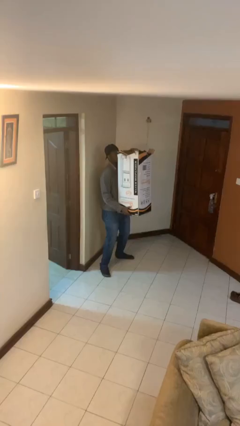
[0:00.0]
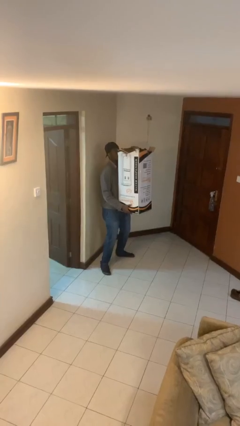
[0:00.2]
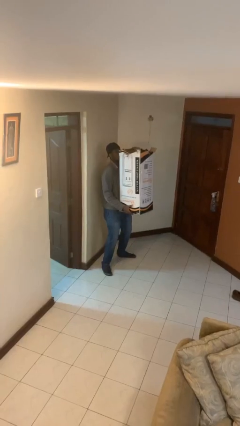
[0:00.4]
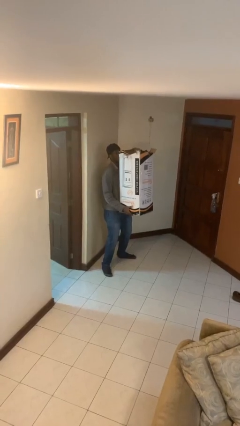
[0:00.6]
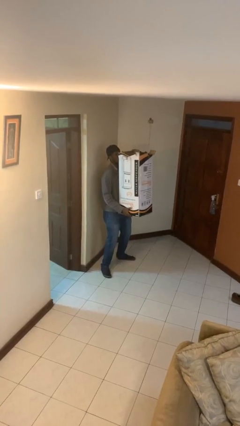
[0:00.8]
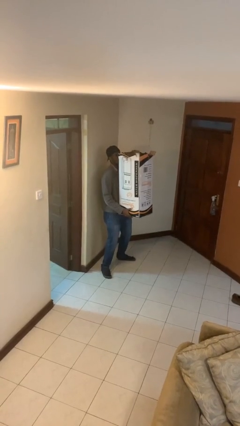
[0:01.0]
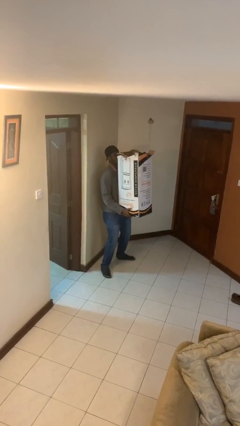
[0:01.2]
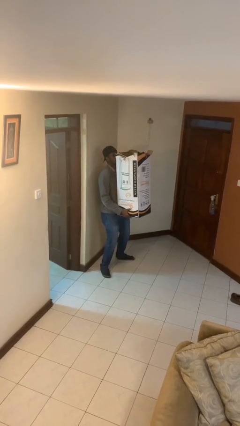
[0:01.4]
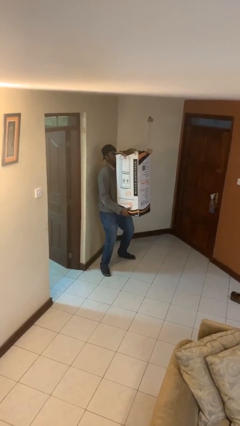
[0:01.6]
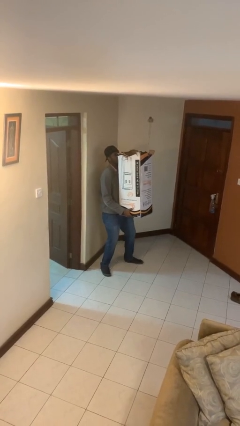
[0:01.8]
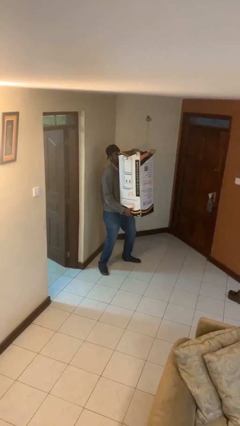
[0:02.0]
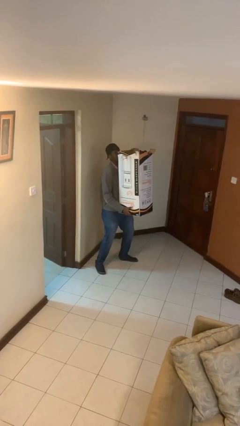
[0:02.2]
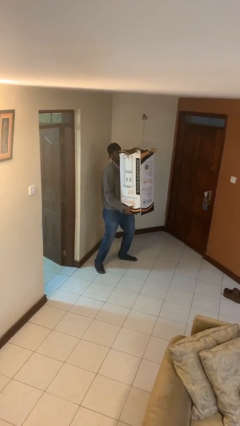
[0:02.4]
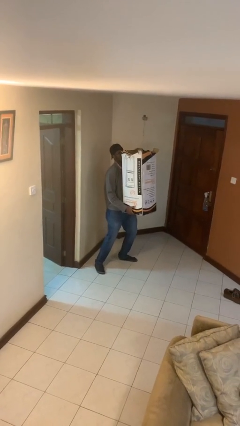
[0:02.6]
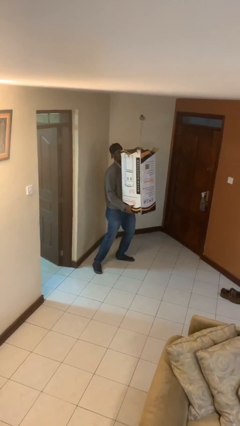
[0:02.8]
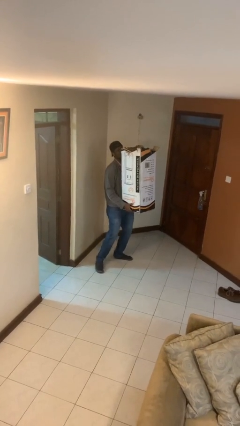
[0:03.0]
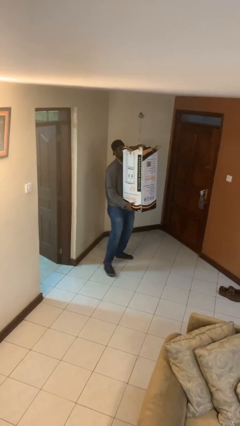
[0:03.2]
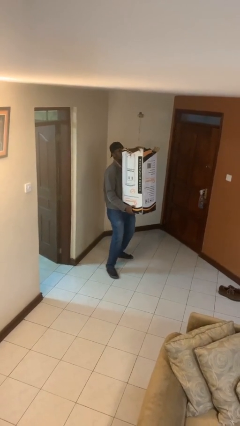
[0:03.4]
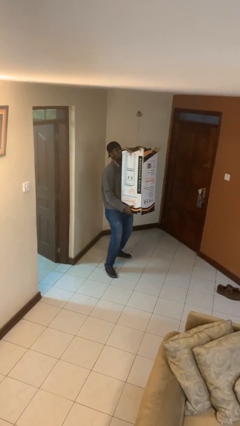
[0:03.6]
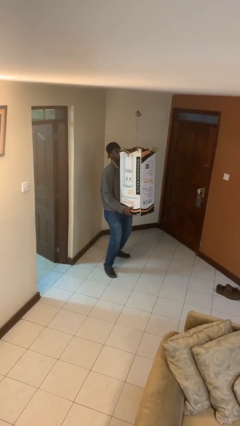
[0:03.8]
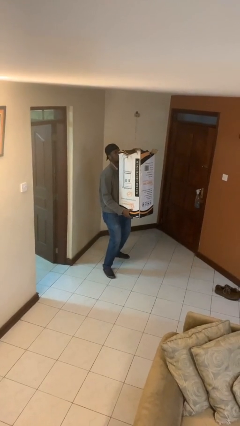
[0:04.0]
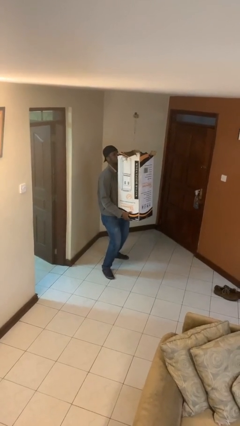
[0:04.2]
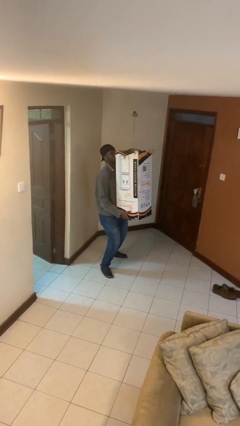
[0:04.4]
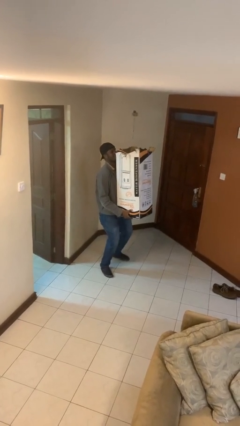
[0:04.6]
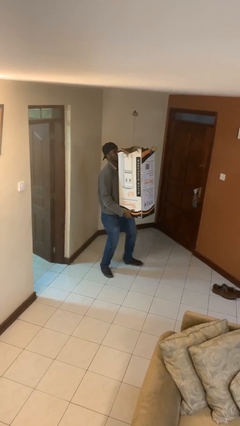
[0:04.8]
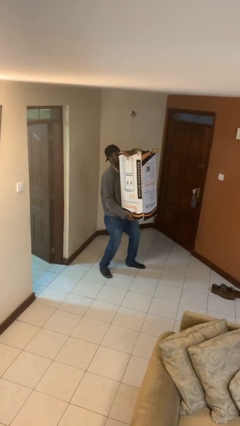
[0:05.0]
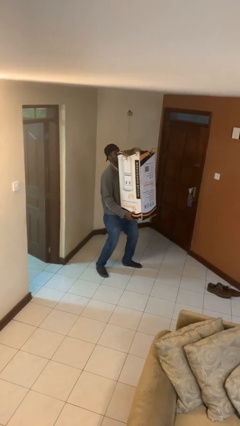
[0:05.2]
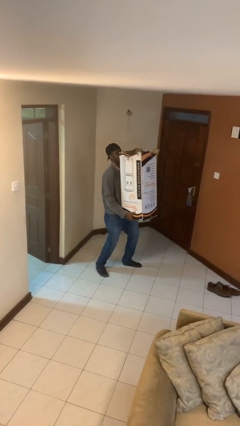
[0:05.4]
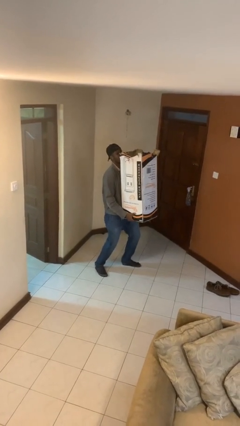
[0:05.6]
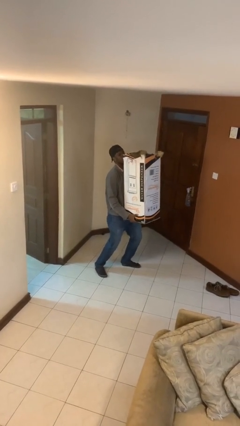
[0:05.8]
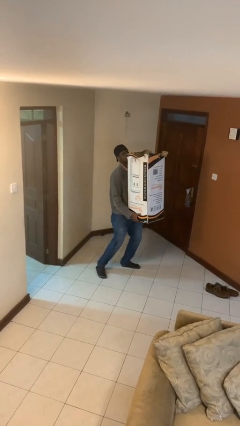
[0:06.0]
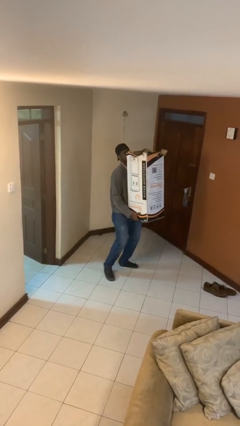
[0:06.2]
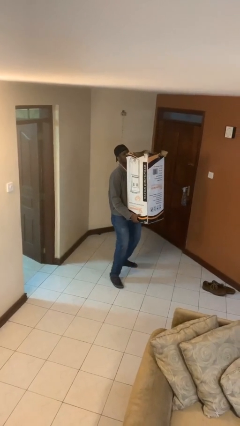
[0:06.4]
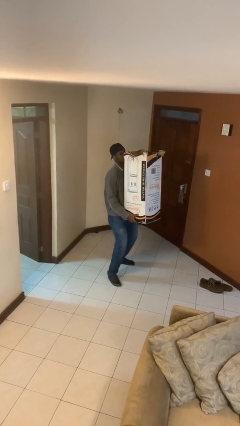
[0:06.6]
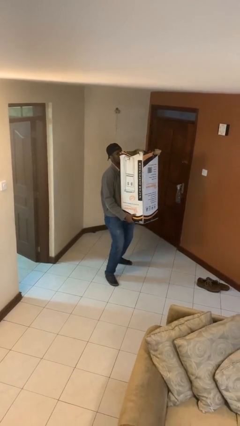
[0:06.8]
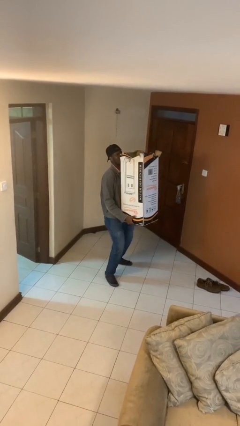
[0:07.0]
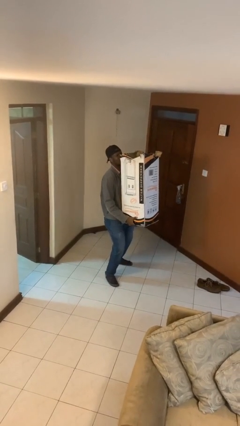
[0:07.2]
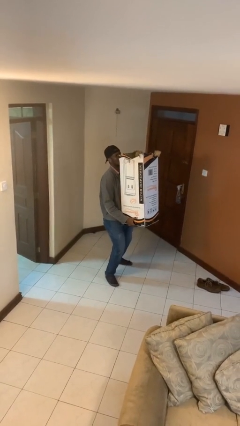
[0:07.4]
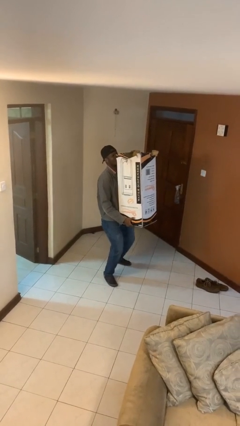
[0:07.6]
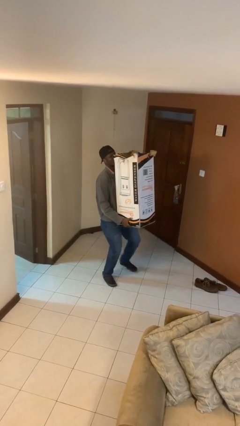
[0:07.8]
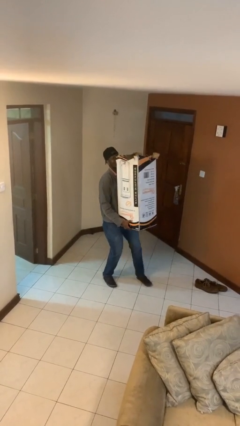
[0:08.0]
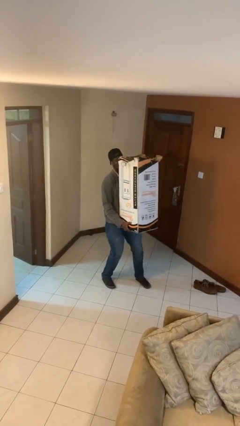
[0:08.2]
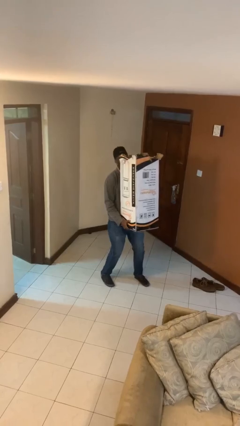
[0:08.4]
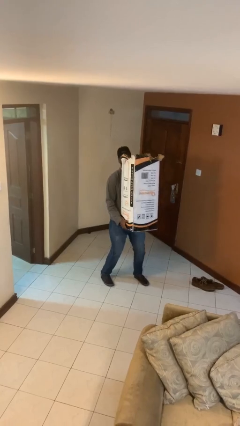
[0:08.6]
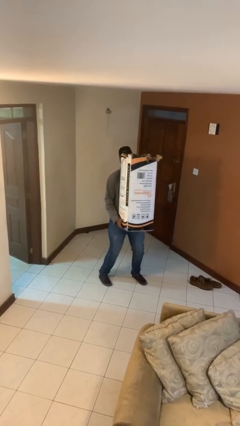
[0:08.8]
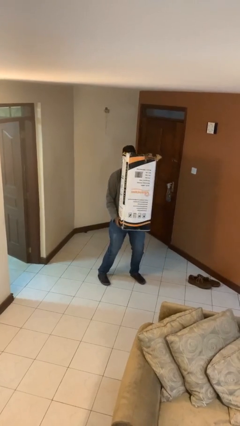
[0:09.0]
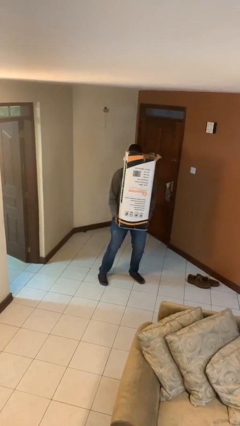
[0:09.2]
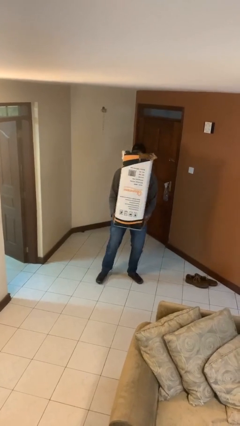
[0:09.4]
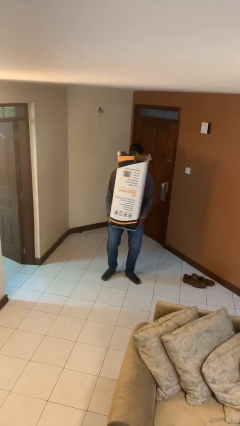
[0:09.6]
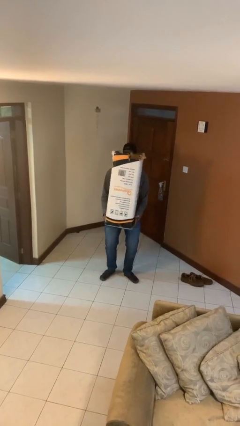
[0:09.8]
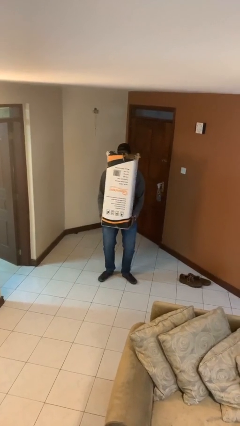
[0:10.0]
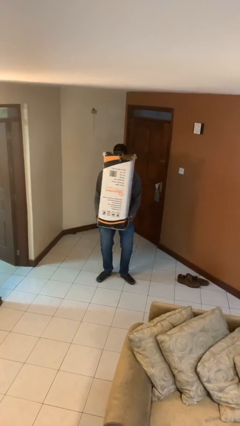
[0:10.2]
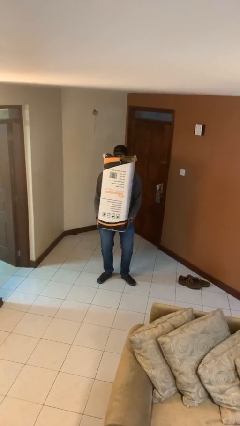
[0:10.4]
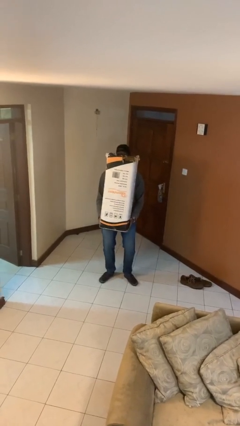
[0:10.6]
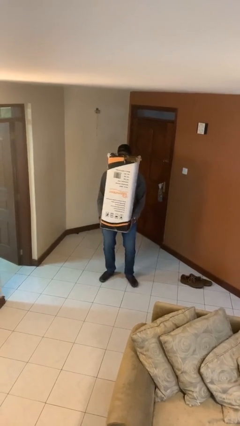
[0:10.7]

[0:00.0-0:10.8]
person carries heavy object

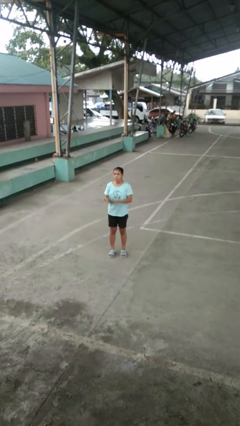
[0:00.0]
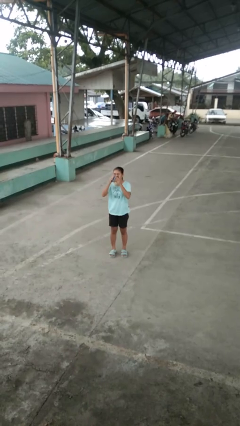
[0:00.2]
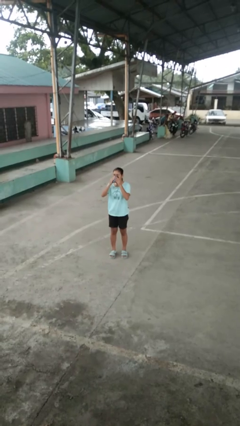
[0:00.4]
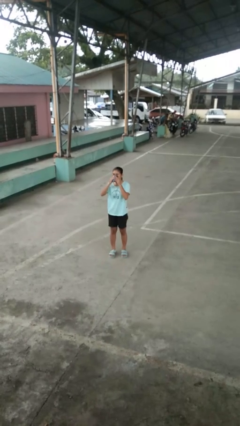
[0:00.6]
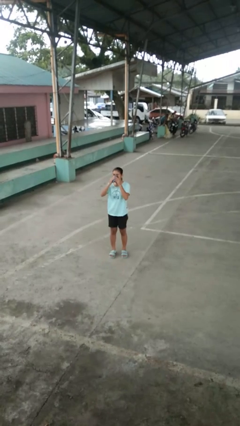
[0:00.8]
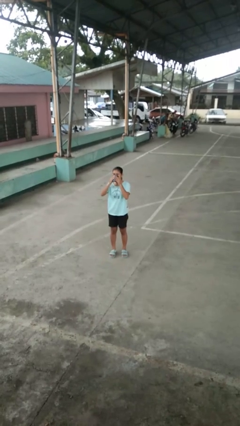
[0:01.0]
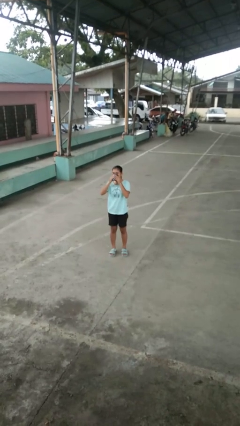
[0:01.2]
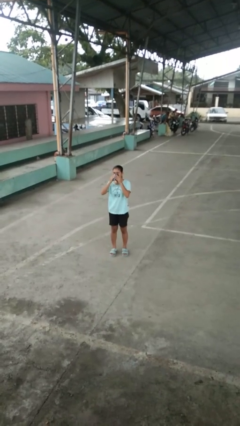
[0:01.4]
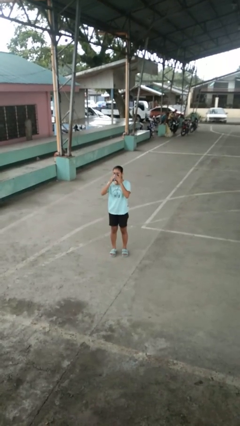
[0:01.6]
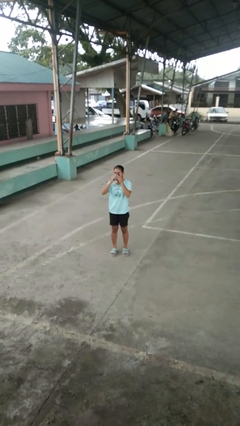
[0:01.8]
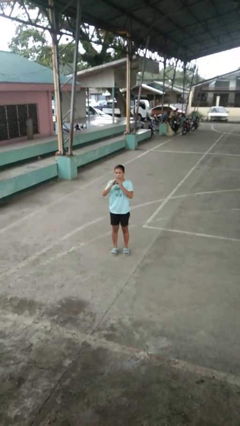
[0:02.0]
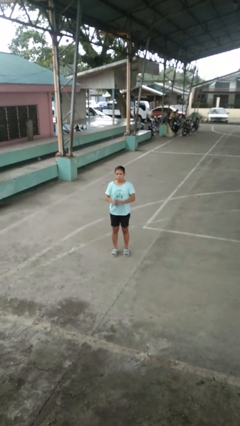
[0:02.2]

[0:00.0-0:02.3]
person blows nose

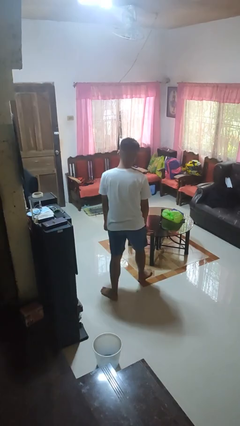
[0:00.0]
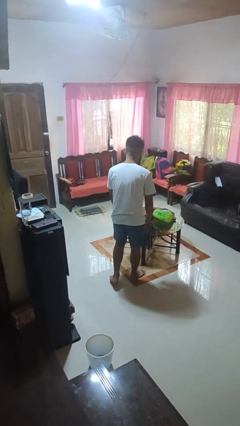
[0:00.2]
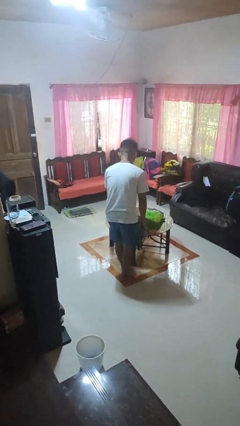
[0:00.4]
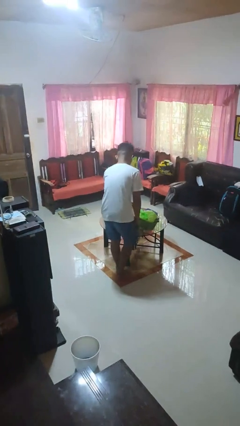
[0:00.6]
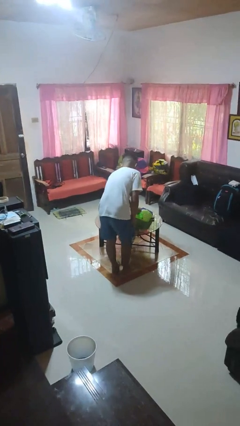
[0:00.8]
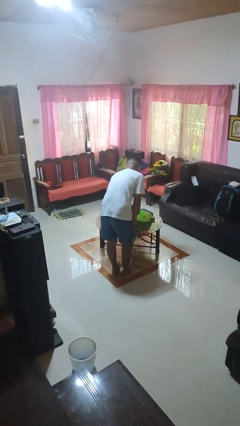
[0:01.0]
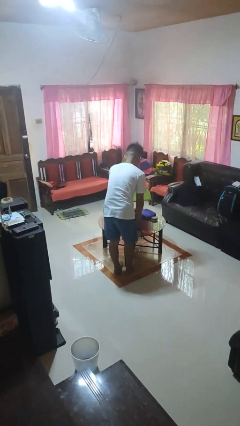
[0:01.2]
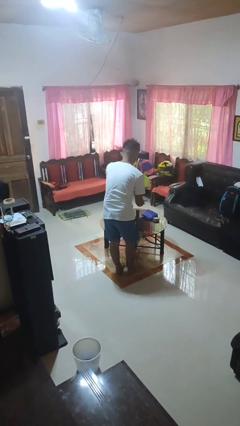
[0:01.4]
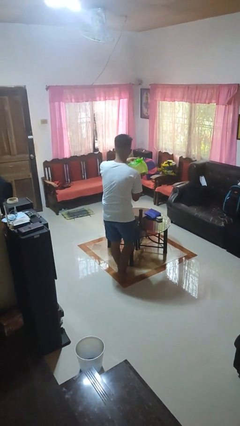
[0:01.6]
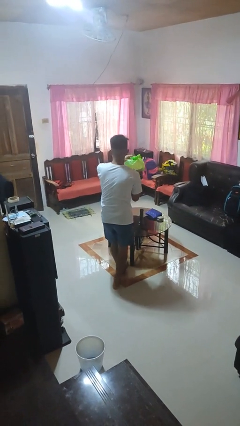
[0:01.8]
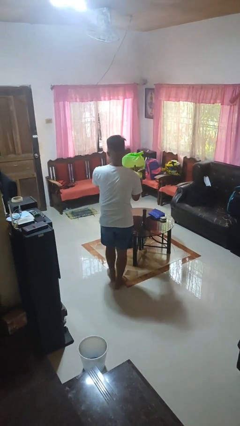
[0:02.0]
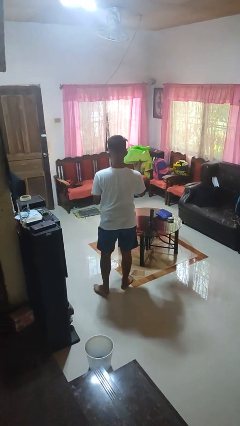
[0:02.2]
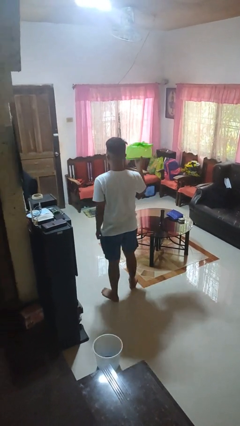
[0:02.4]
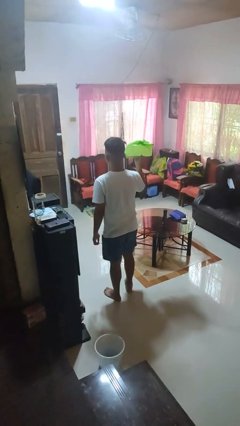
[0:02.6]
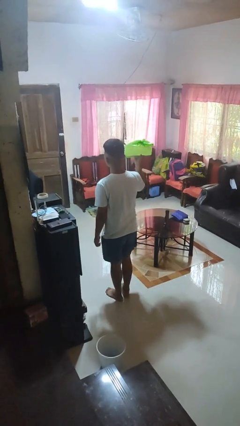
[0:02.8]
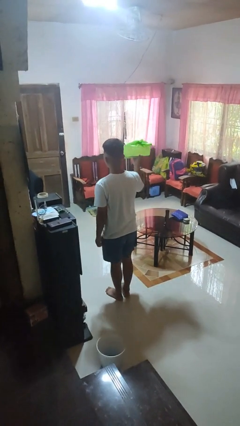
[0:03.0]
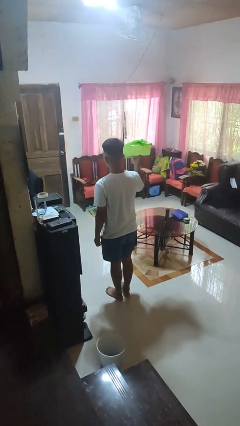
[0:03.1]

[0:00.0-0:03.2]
person picks up object from table

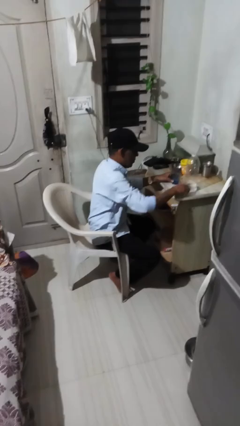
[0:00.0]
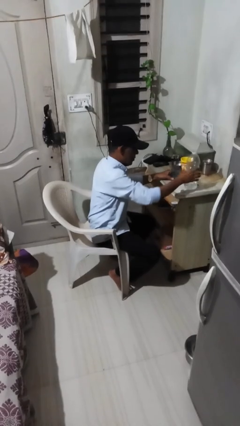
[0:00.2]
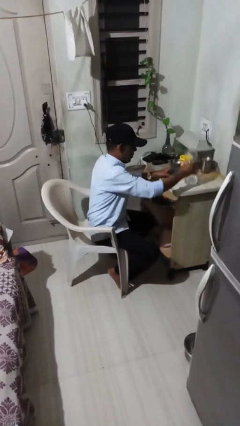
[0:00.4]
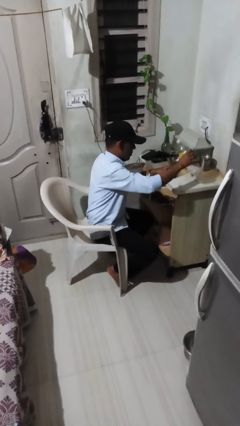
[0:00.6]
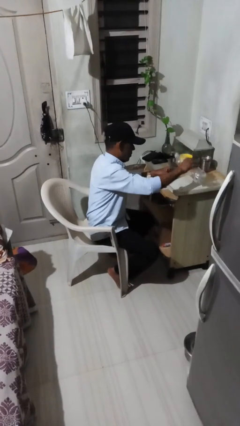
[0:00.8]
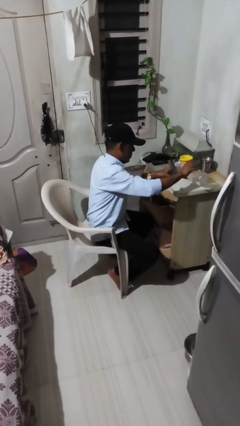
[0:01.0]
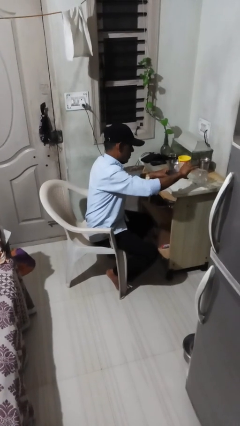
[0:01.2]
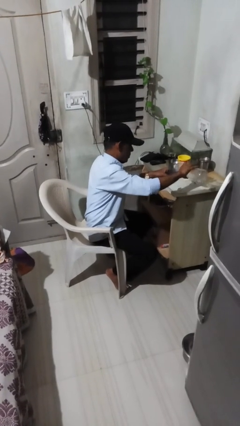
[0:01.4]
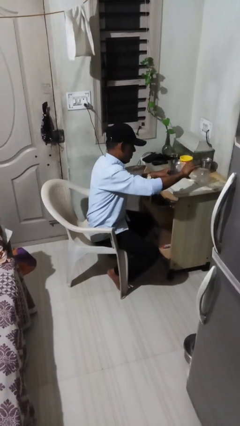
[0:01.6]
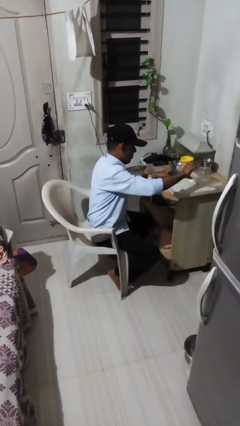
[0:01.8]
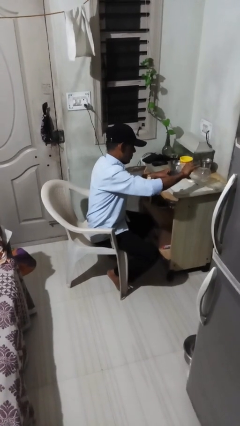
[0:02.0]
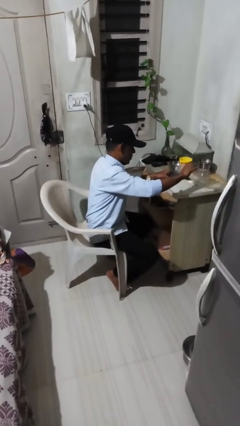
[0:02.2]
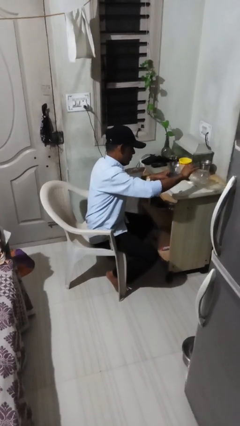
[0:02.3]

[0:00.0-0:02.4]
person pours liquid into cup
